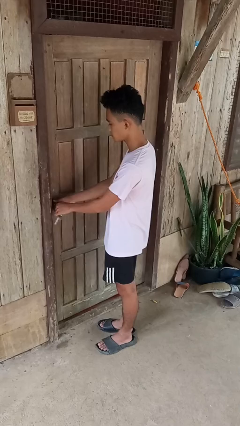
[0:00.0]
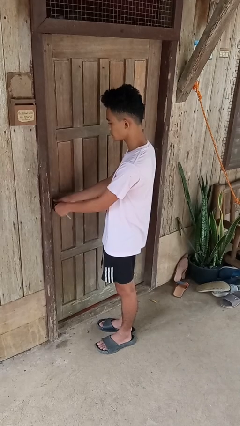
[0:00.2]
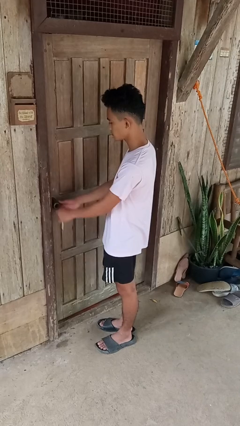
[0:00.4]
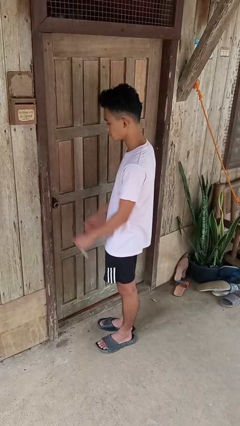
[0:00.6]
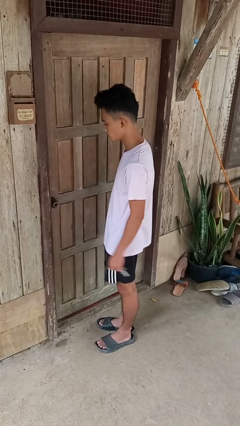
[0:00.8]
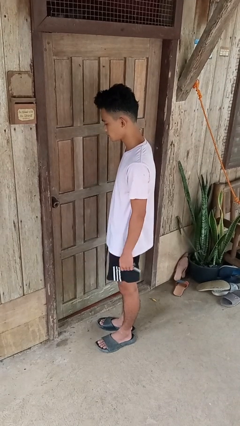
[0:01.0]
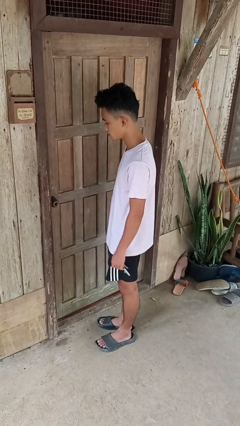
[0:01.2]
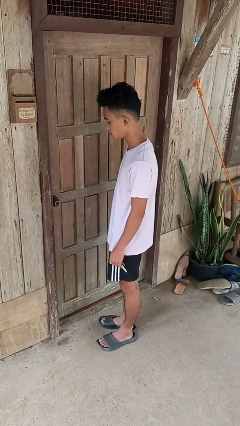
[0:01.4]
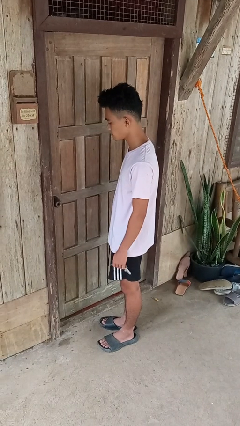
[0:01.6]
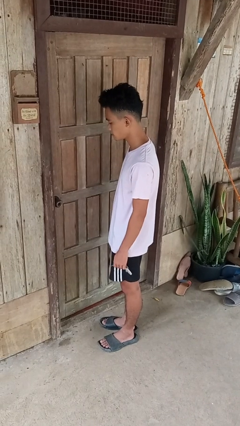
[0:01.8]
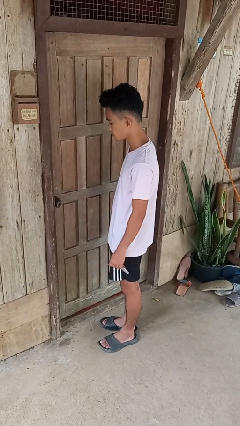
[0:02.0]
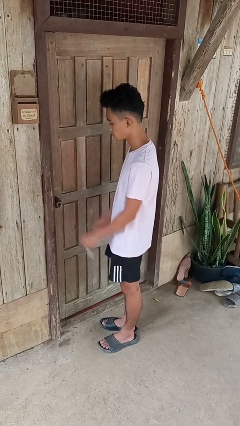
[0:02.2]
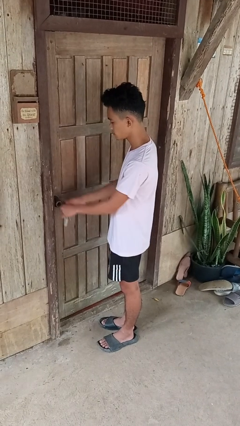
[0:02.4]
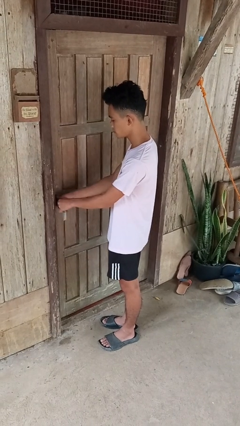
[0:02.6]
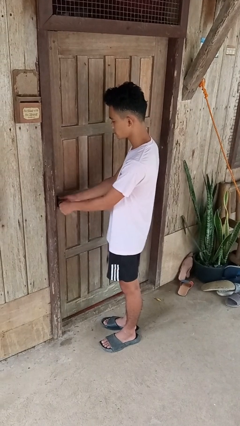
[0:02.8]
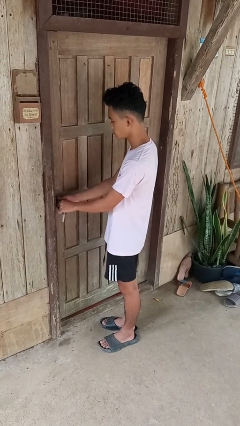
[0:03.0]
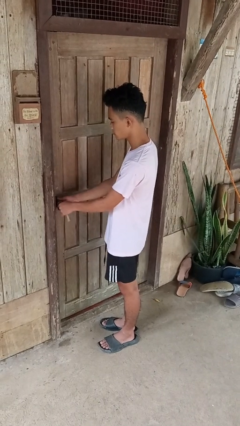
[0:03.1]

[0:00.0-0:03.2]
person locks door with keys

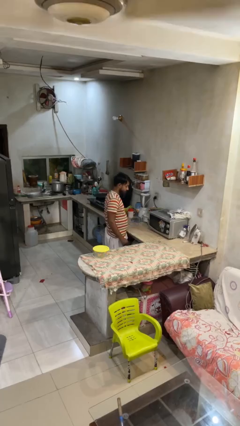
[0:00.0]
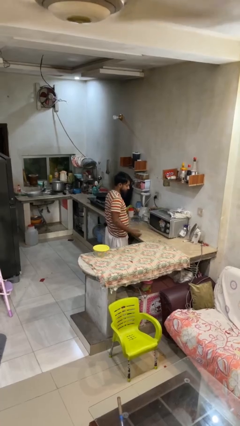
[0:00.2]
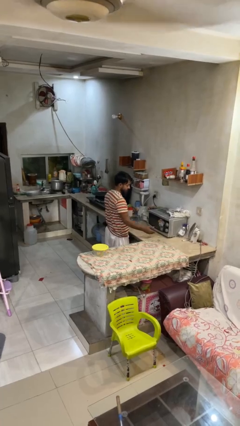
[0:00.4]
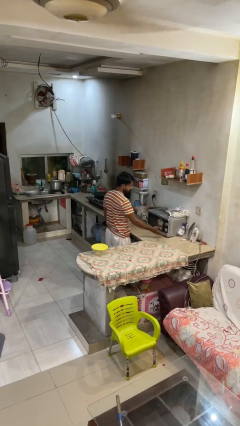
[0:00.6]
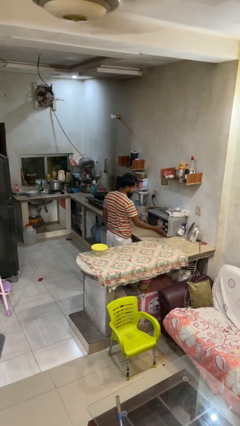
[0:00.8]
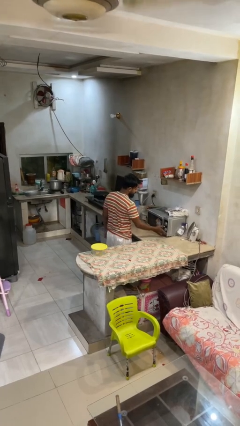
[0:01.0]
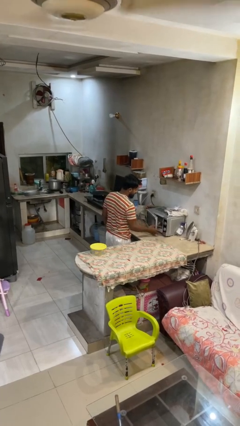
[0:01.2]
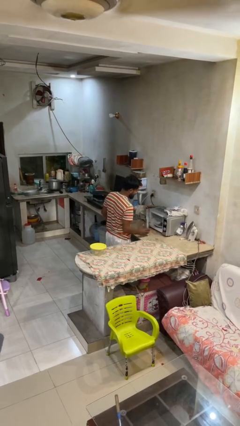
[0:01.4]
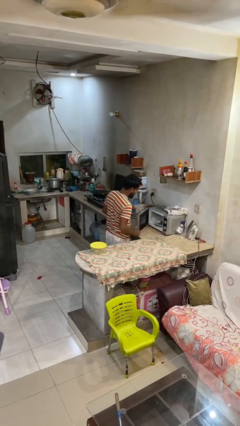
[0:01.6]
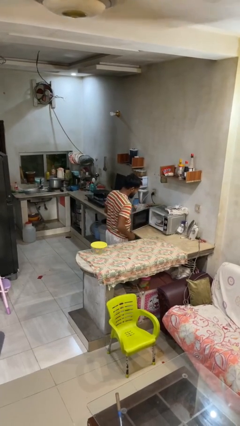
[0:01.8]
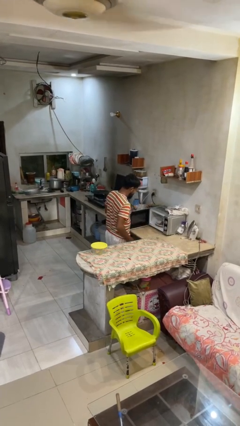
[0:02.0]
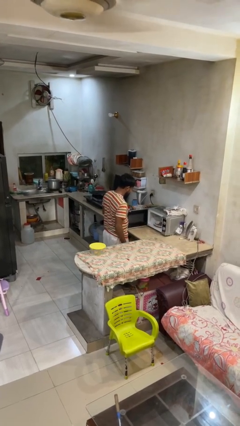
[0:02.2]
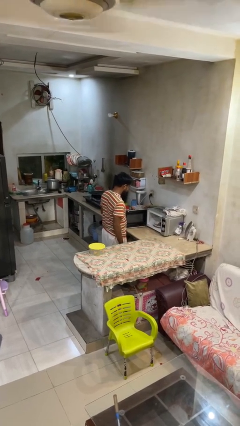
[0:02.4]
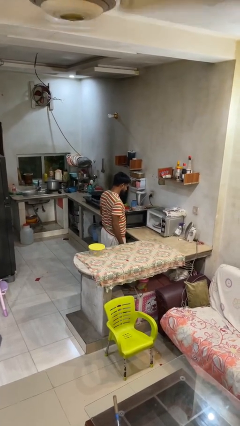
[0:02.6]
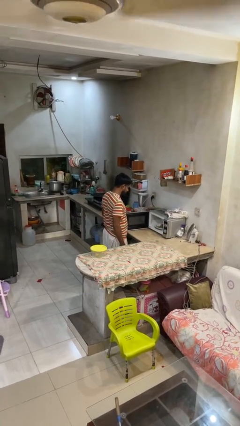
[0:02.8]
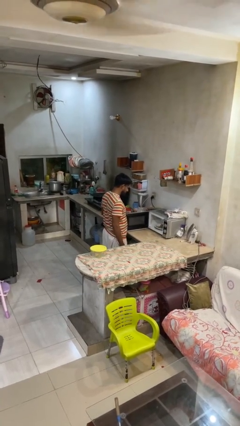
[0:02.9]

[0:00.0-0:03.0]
person opens microwave

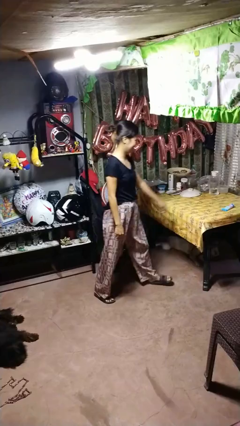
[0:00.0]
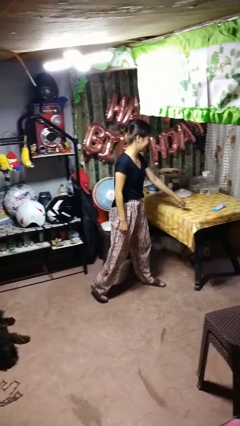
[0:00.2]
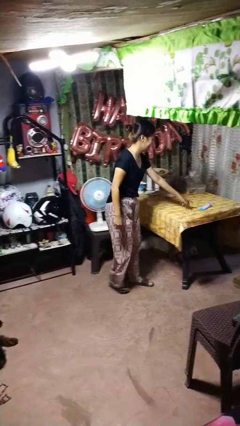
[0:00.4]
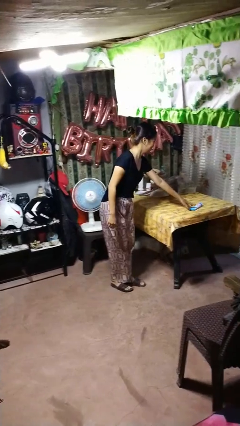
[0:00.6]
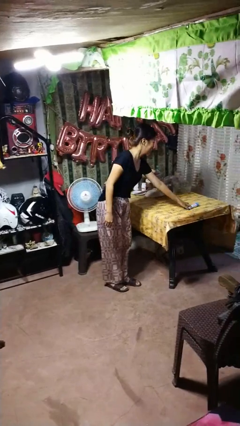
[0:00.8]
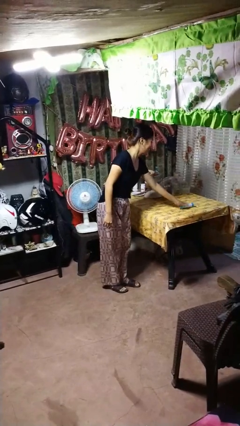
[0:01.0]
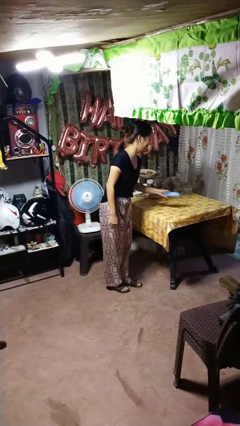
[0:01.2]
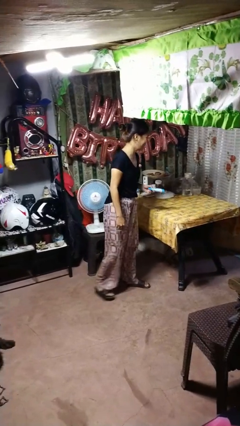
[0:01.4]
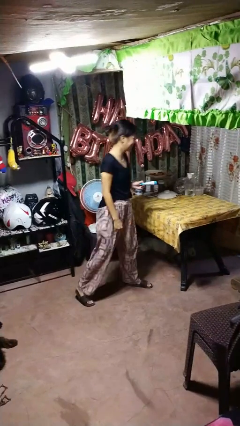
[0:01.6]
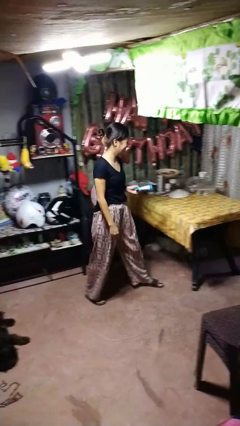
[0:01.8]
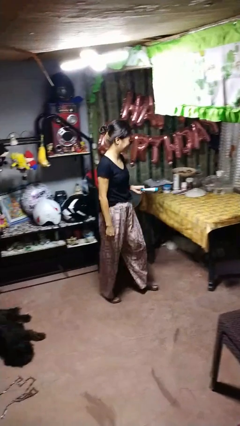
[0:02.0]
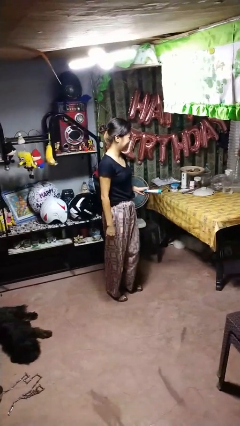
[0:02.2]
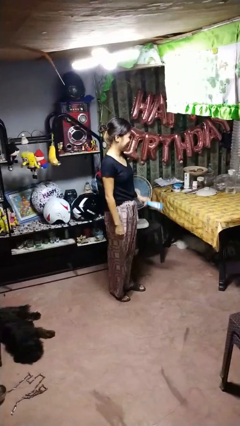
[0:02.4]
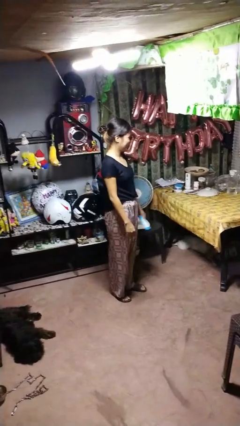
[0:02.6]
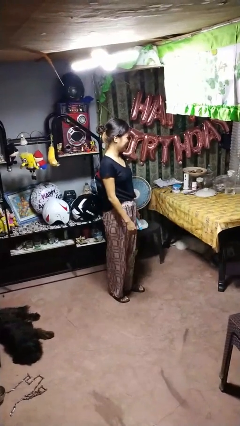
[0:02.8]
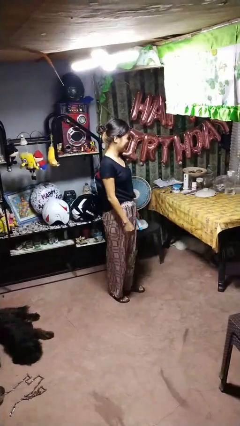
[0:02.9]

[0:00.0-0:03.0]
person picks up object from table

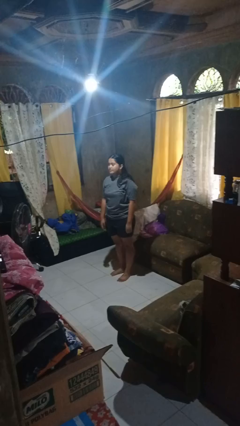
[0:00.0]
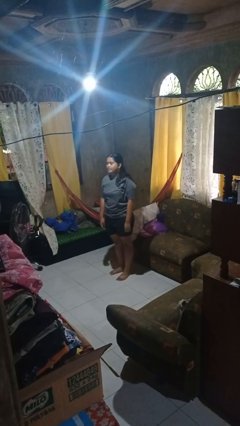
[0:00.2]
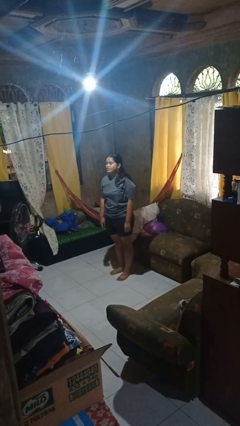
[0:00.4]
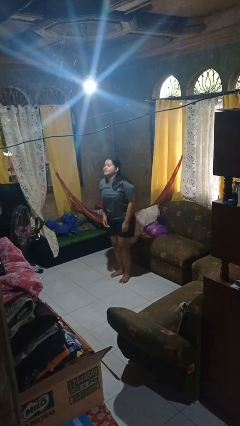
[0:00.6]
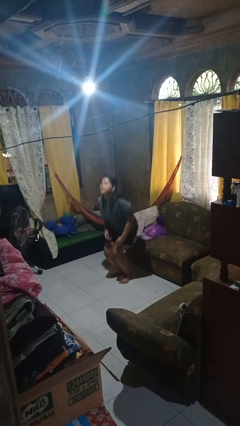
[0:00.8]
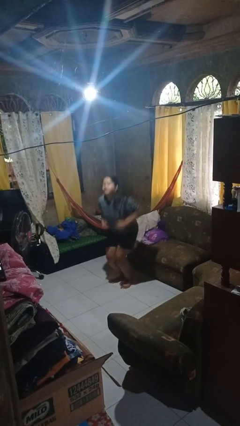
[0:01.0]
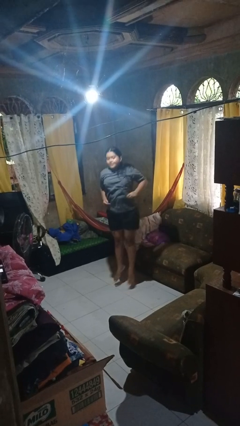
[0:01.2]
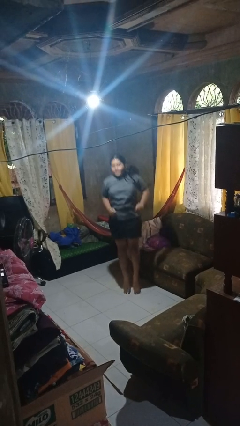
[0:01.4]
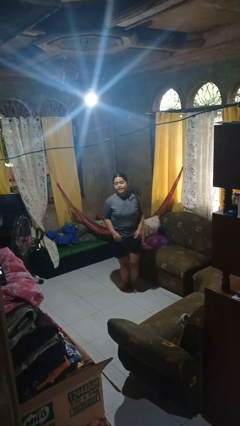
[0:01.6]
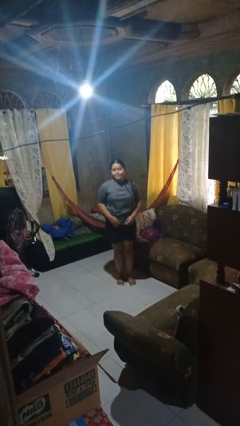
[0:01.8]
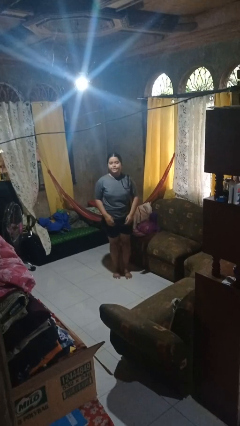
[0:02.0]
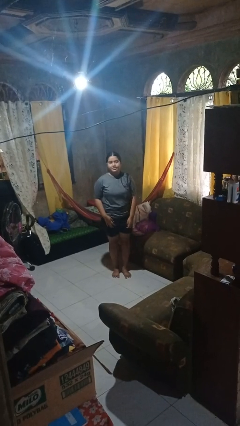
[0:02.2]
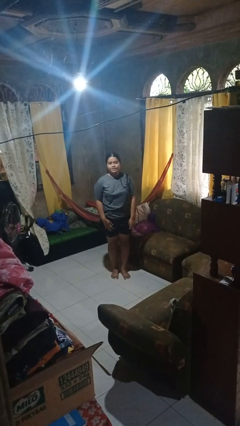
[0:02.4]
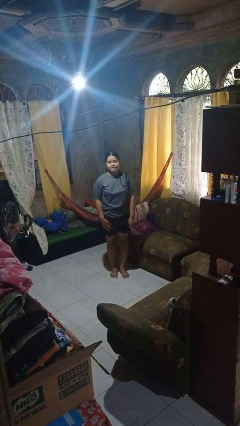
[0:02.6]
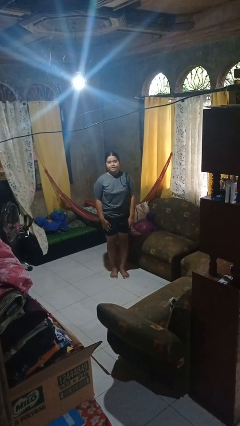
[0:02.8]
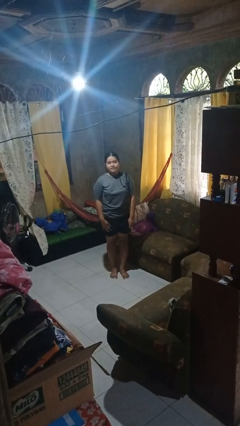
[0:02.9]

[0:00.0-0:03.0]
person jumps

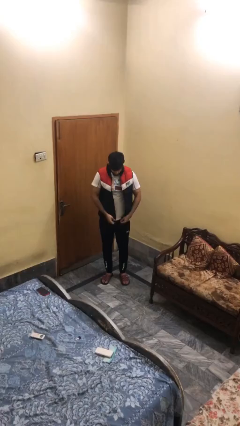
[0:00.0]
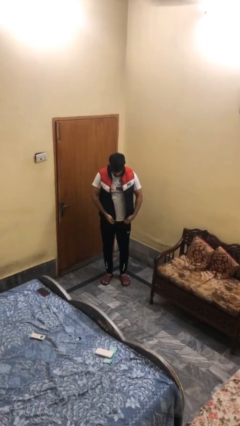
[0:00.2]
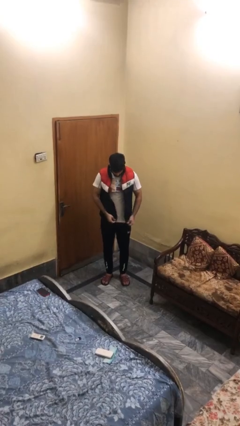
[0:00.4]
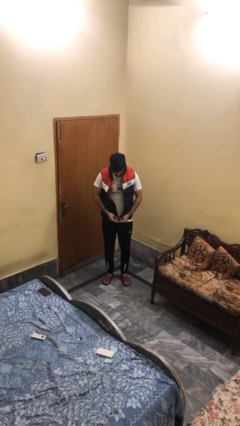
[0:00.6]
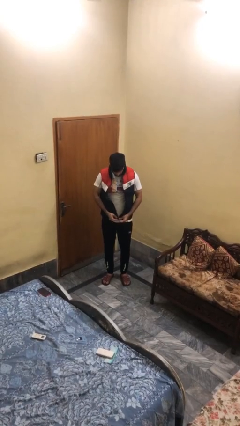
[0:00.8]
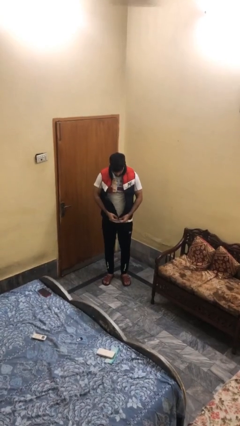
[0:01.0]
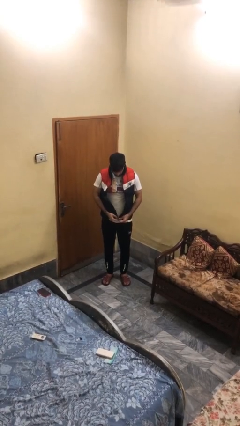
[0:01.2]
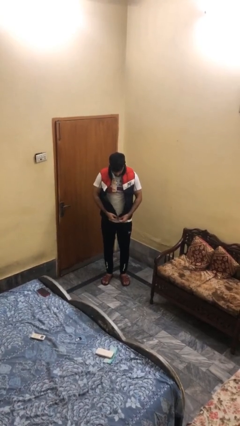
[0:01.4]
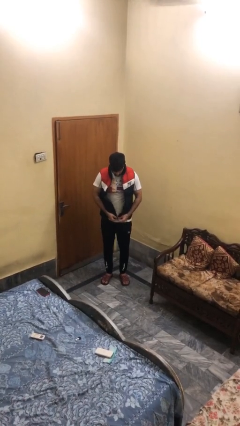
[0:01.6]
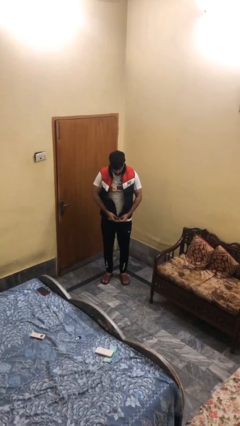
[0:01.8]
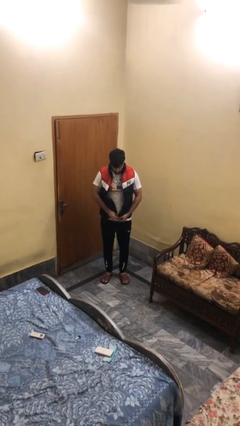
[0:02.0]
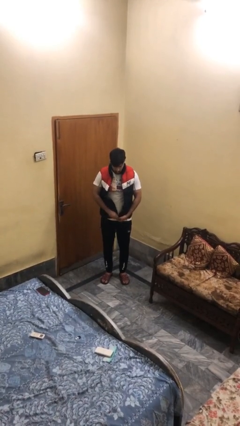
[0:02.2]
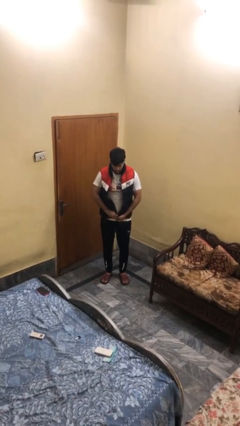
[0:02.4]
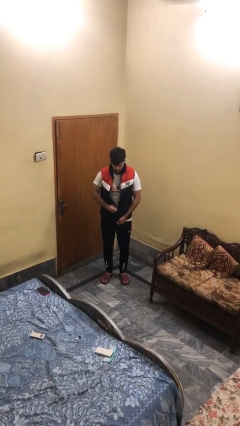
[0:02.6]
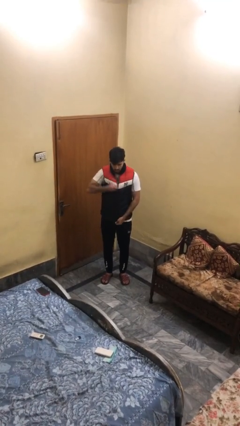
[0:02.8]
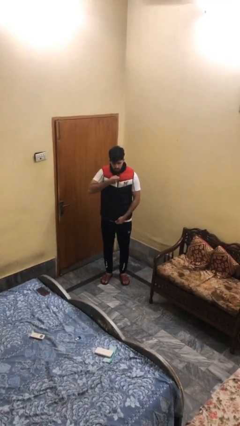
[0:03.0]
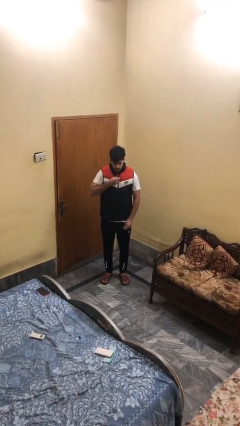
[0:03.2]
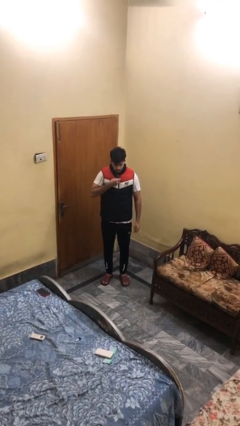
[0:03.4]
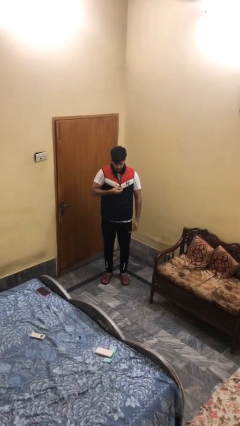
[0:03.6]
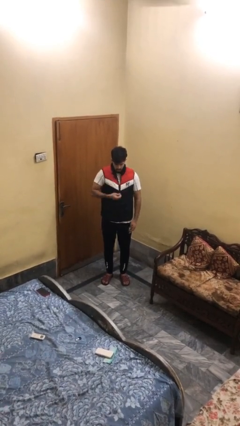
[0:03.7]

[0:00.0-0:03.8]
person zips up jacket

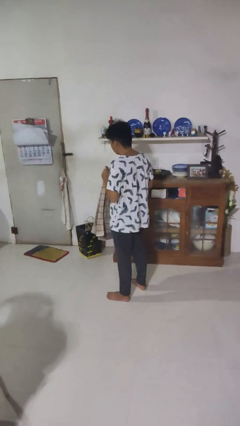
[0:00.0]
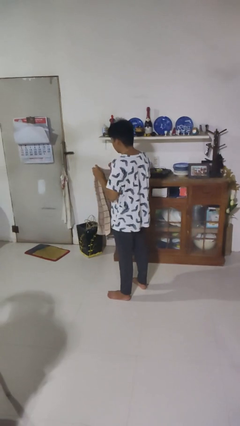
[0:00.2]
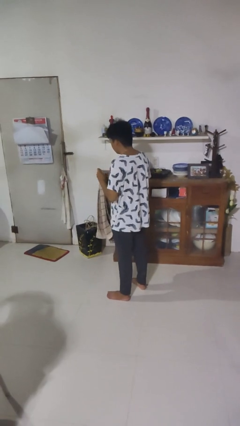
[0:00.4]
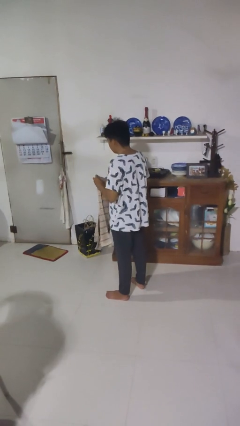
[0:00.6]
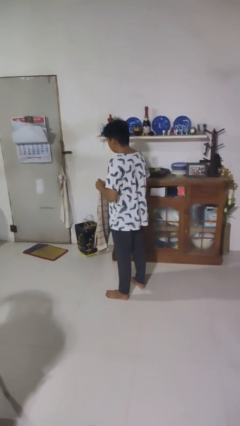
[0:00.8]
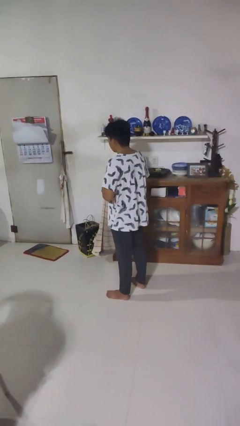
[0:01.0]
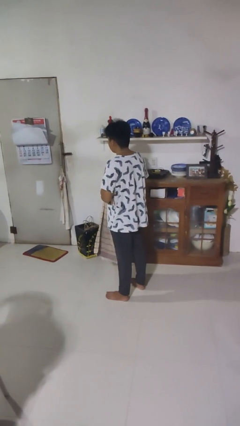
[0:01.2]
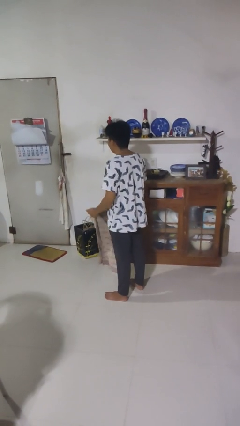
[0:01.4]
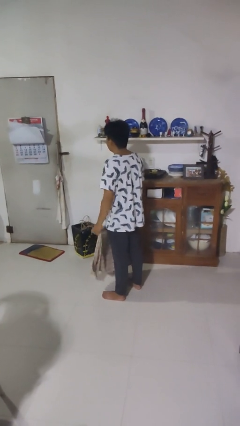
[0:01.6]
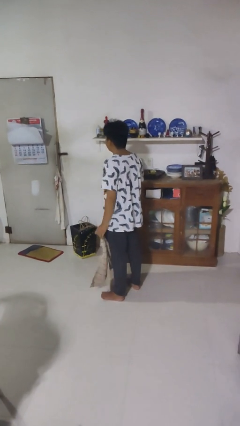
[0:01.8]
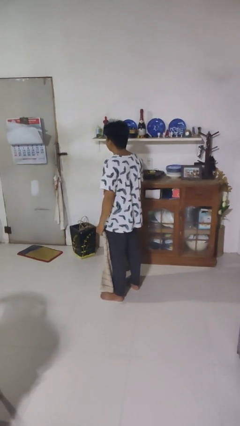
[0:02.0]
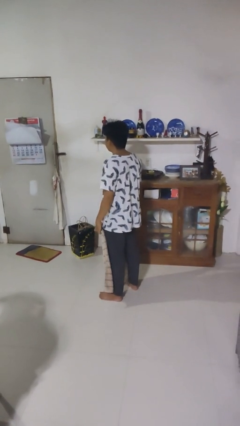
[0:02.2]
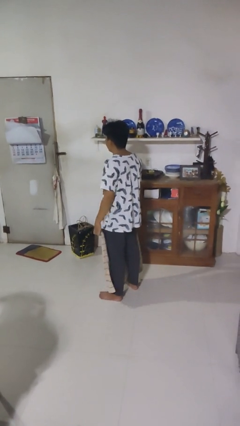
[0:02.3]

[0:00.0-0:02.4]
person unfolds blanket
